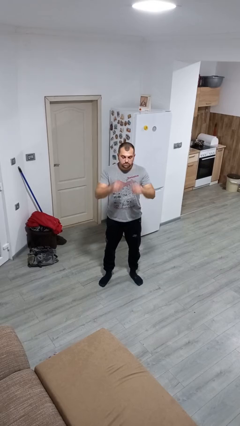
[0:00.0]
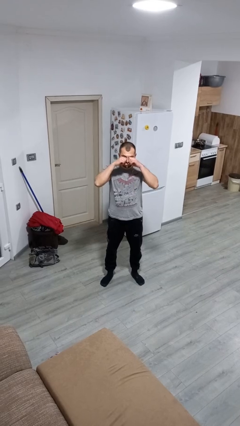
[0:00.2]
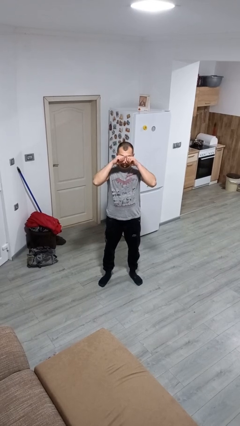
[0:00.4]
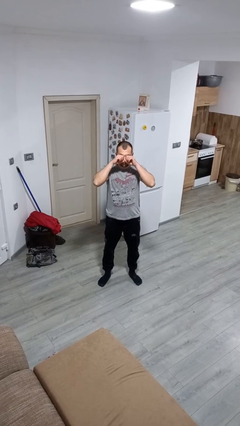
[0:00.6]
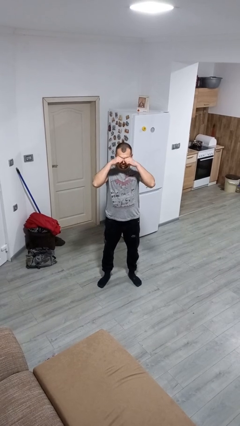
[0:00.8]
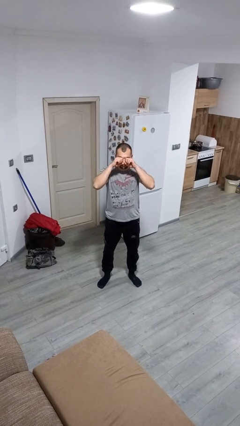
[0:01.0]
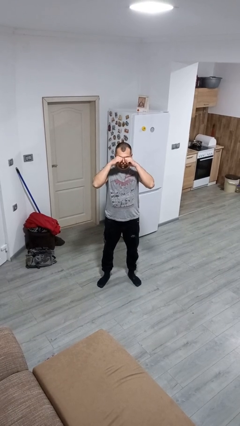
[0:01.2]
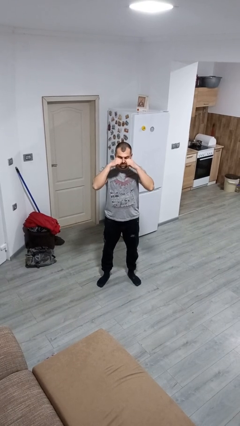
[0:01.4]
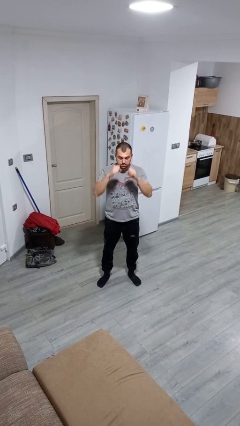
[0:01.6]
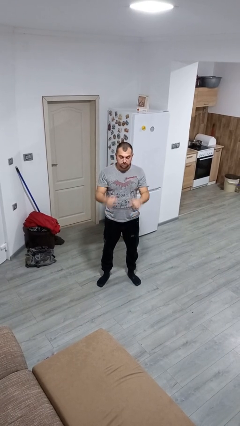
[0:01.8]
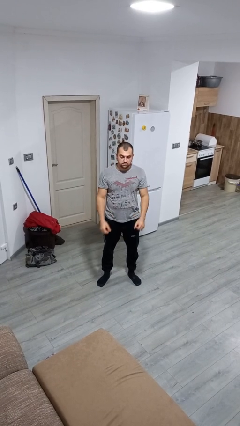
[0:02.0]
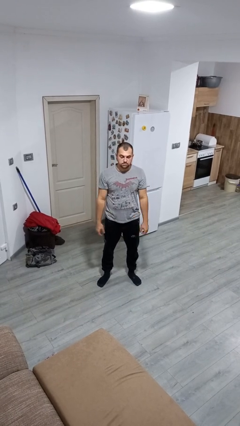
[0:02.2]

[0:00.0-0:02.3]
person rubs eyes

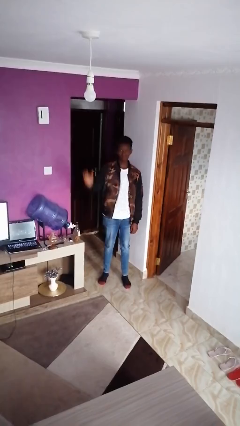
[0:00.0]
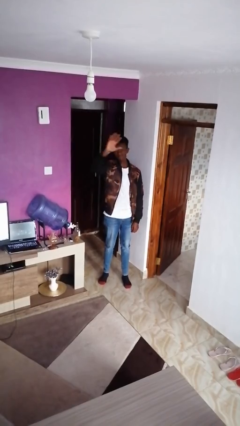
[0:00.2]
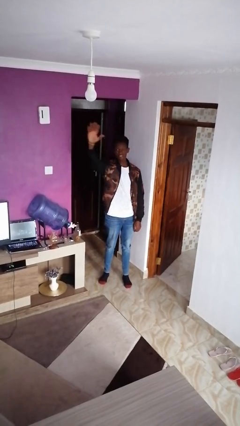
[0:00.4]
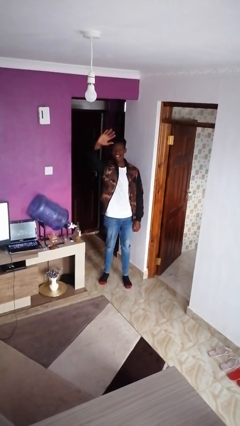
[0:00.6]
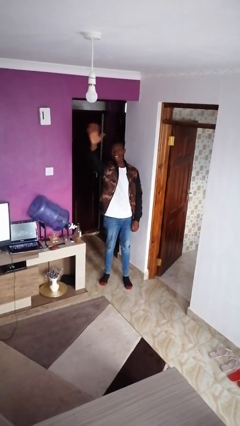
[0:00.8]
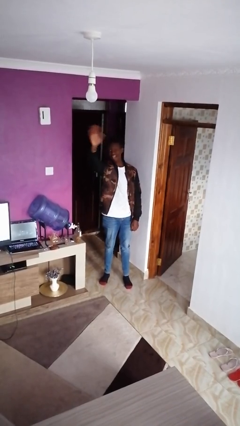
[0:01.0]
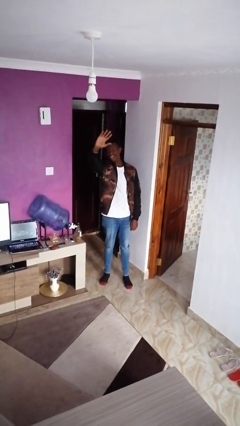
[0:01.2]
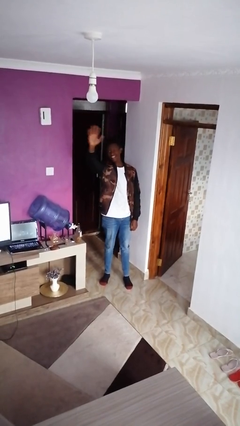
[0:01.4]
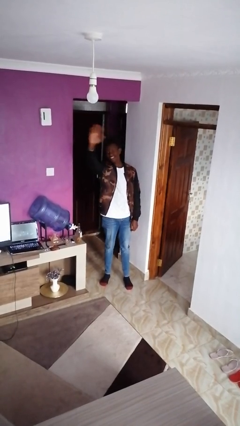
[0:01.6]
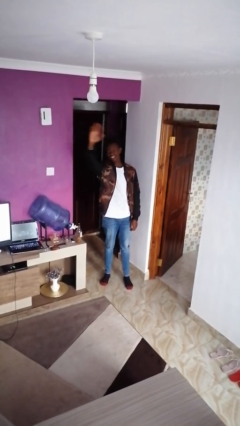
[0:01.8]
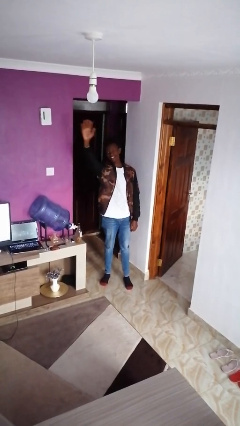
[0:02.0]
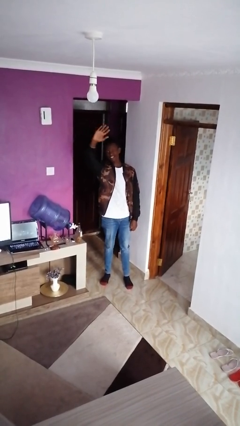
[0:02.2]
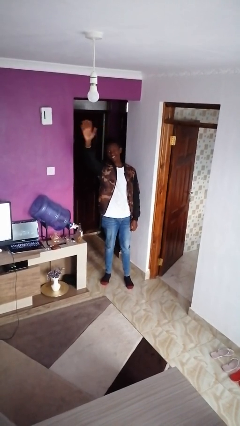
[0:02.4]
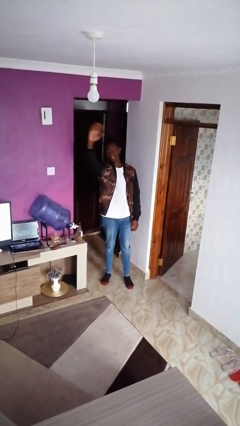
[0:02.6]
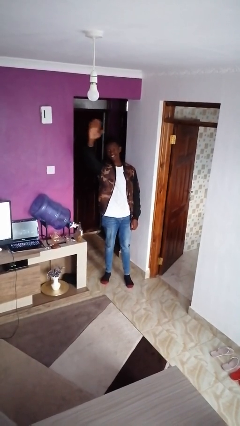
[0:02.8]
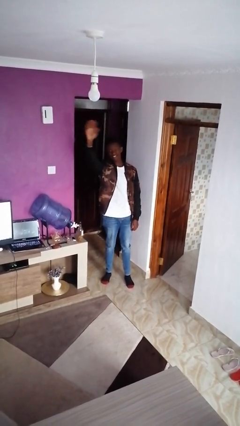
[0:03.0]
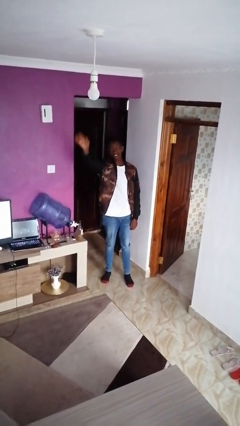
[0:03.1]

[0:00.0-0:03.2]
person waves at person

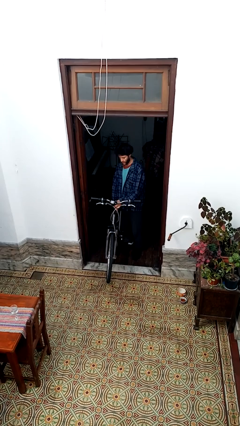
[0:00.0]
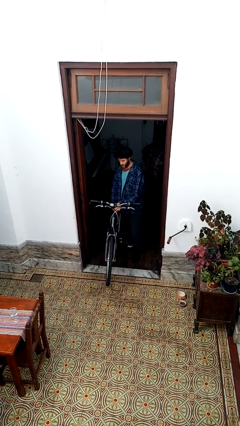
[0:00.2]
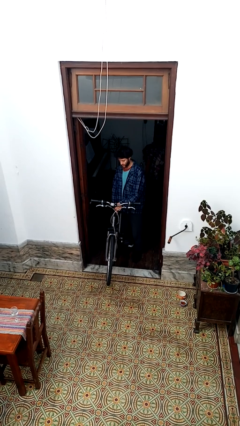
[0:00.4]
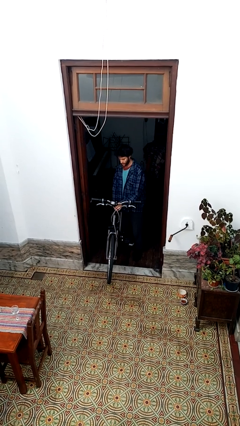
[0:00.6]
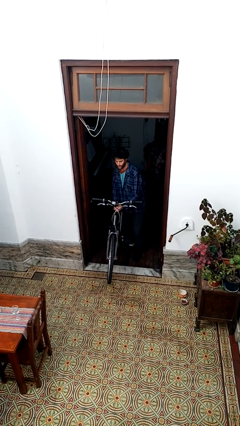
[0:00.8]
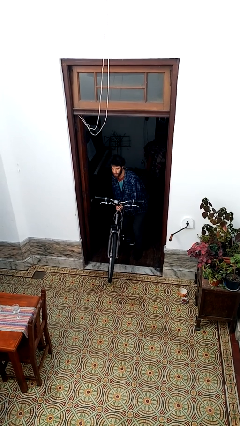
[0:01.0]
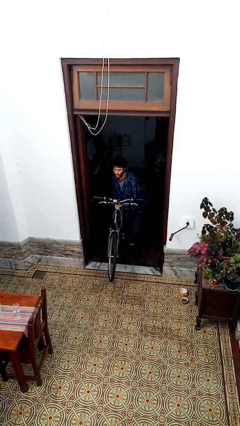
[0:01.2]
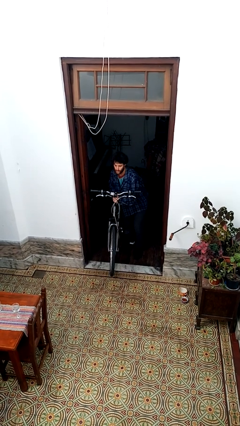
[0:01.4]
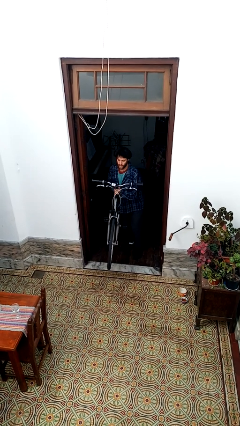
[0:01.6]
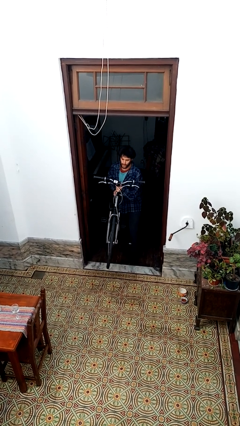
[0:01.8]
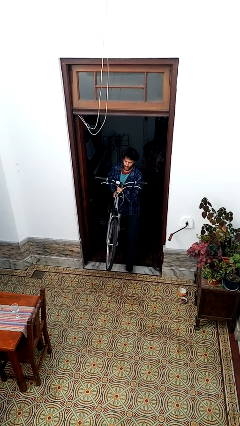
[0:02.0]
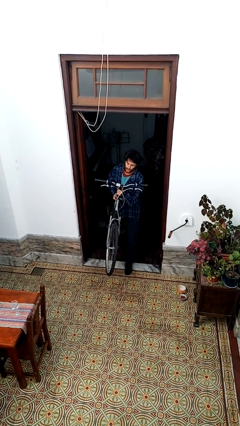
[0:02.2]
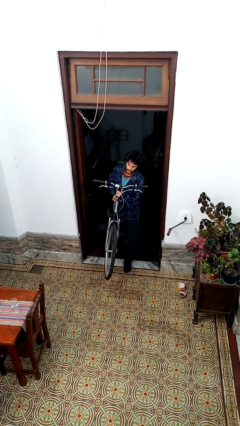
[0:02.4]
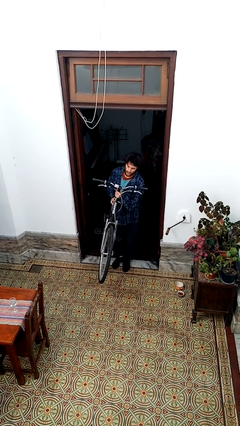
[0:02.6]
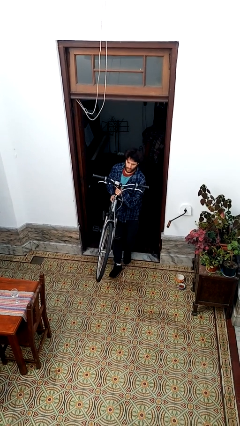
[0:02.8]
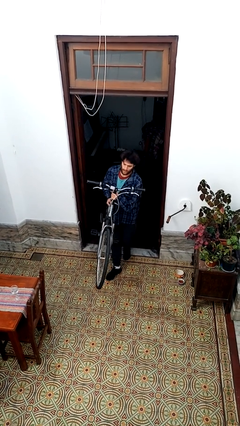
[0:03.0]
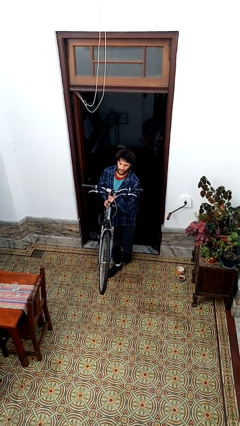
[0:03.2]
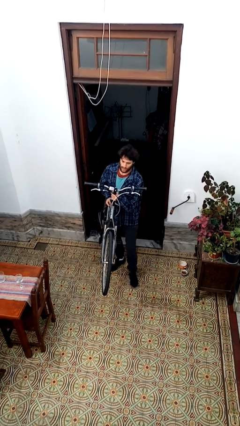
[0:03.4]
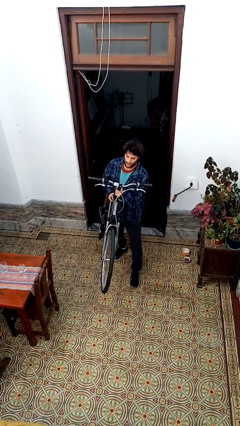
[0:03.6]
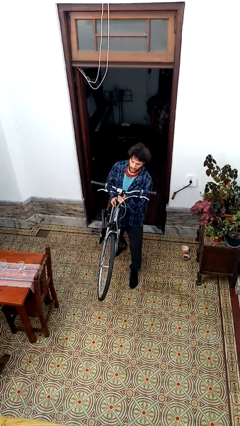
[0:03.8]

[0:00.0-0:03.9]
person carries bicycle

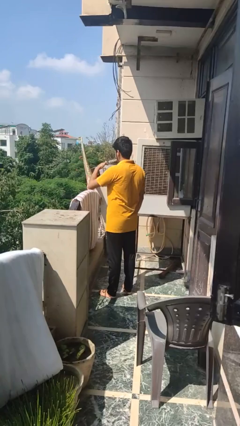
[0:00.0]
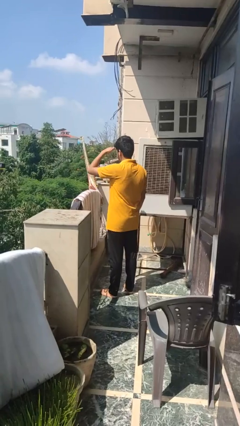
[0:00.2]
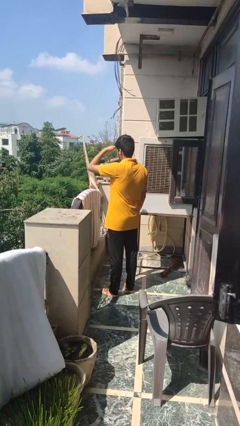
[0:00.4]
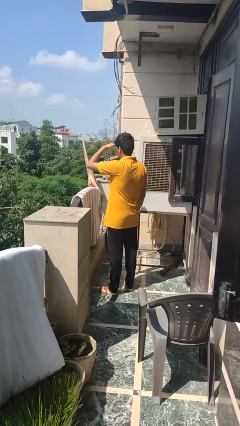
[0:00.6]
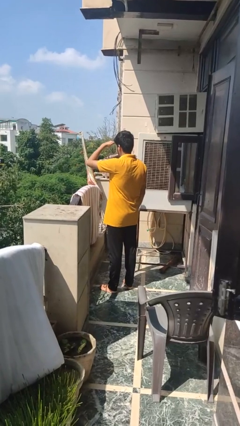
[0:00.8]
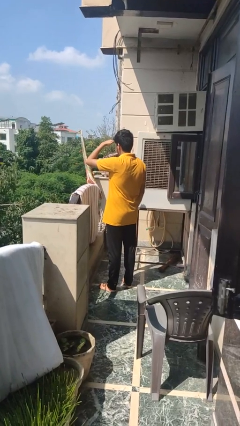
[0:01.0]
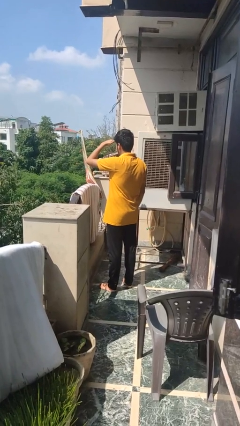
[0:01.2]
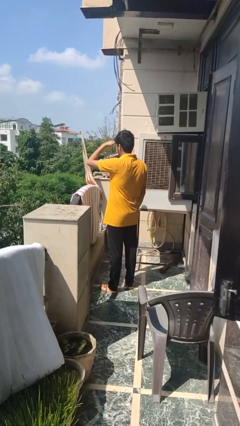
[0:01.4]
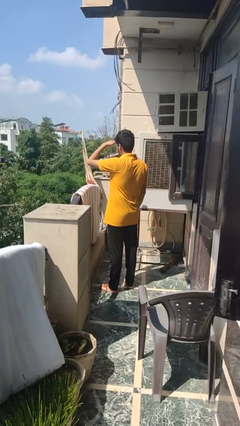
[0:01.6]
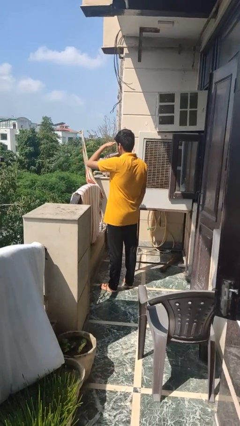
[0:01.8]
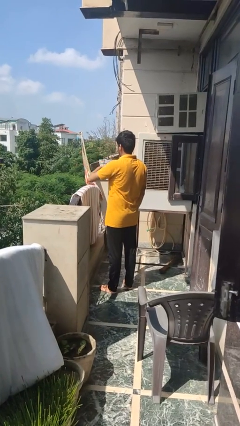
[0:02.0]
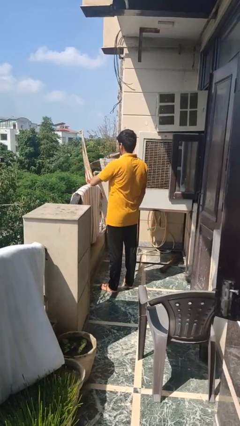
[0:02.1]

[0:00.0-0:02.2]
person shades eyes

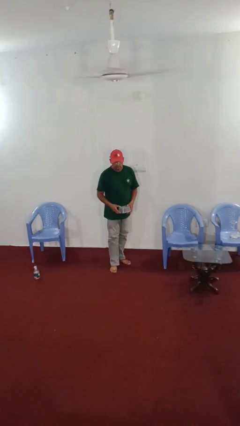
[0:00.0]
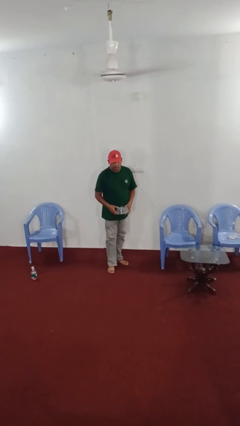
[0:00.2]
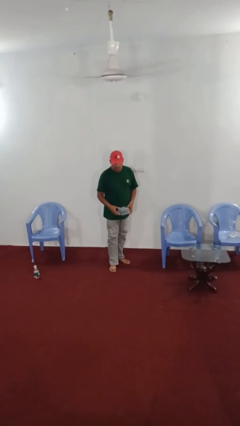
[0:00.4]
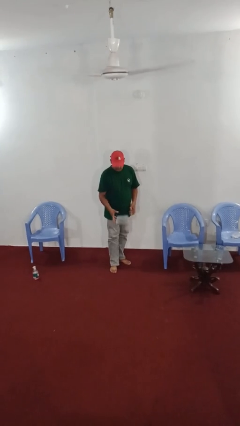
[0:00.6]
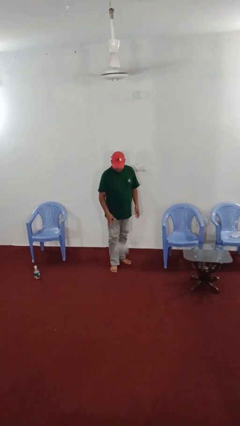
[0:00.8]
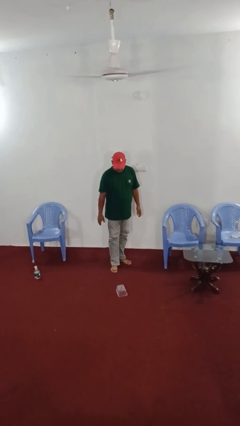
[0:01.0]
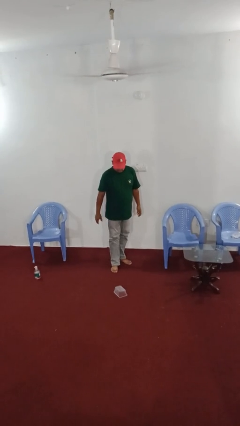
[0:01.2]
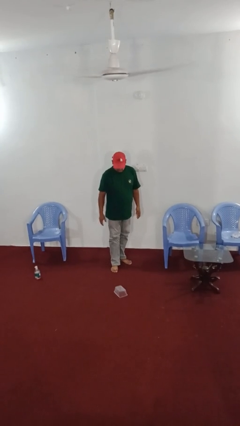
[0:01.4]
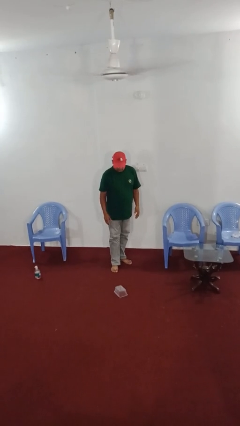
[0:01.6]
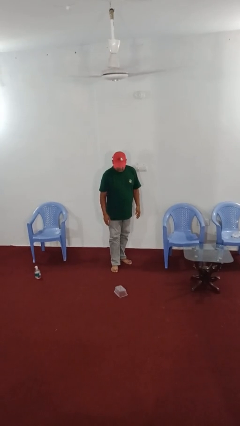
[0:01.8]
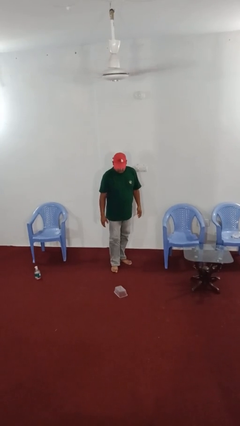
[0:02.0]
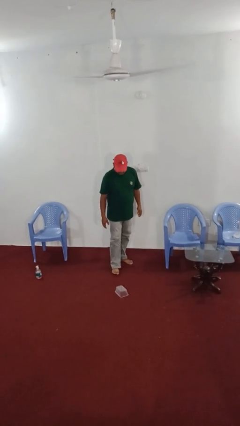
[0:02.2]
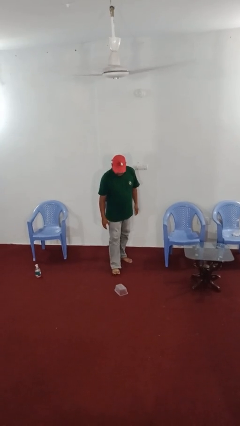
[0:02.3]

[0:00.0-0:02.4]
person throws object to ground

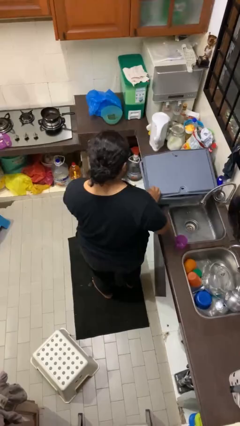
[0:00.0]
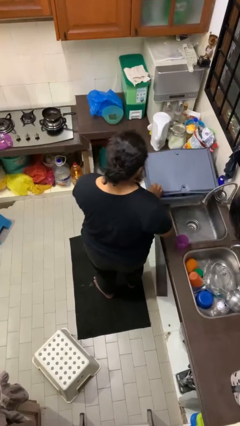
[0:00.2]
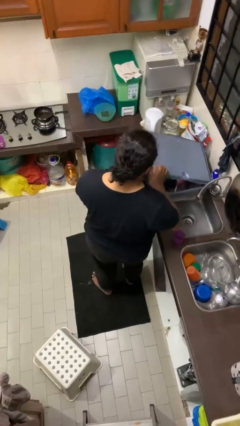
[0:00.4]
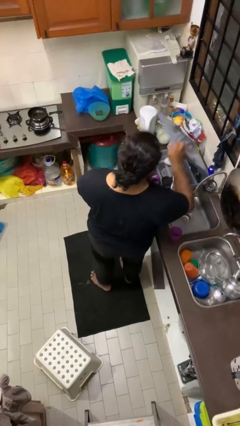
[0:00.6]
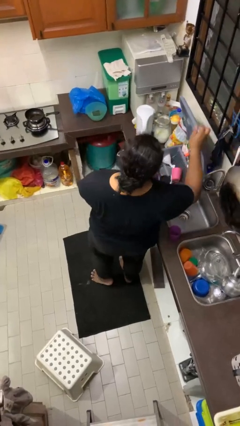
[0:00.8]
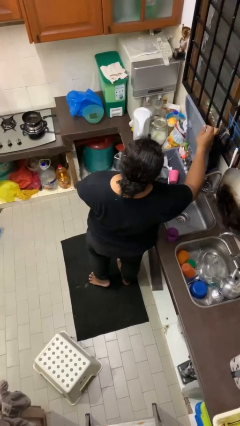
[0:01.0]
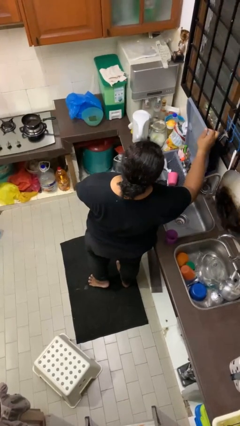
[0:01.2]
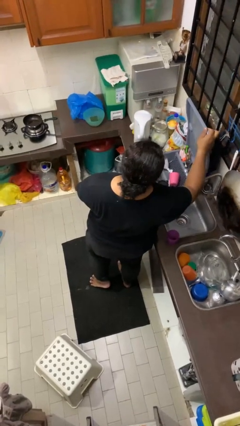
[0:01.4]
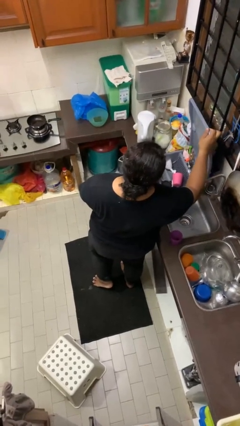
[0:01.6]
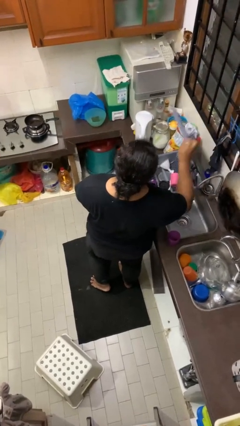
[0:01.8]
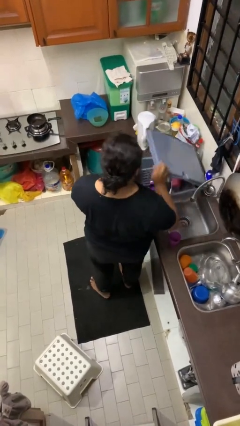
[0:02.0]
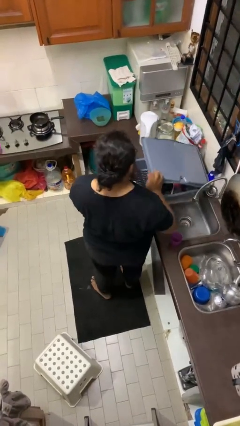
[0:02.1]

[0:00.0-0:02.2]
person opens dishwasher

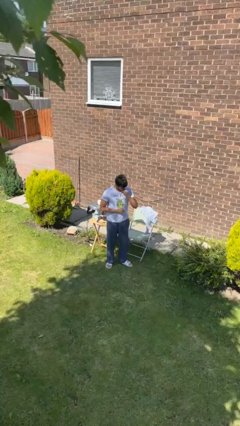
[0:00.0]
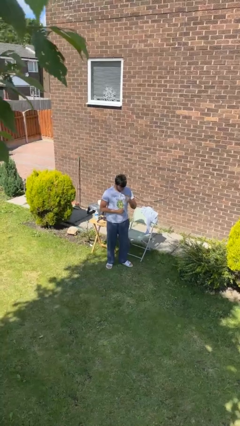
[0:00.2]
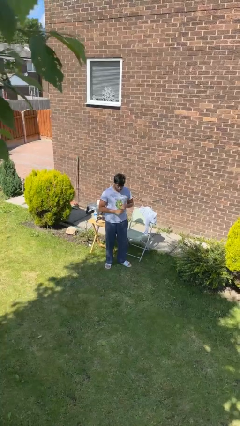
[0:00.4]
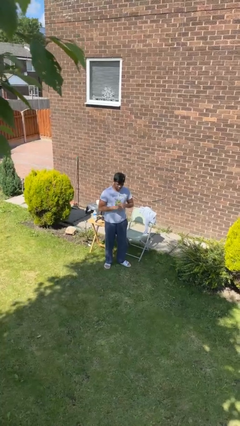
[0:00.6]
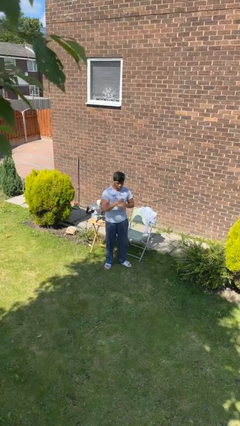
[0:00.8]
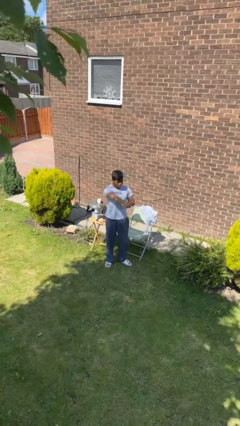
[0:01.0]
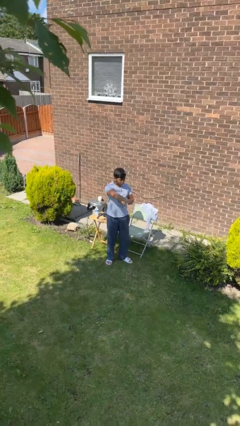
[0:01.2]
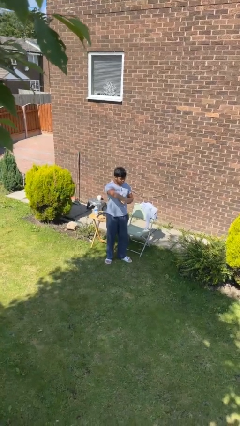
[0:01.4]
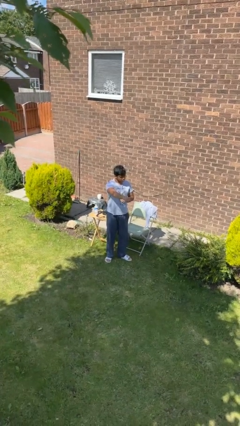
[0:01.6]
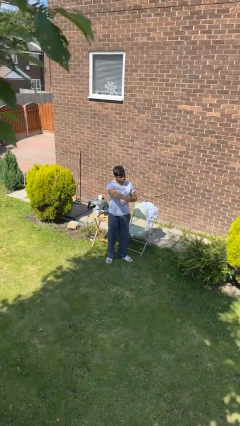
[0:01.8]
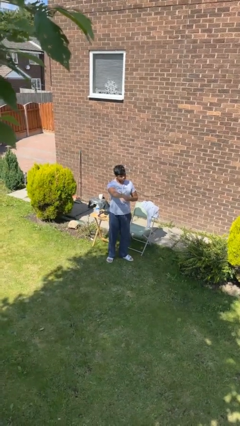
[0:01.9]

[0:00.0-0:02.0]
person punches
